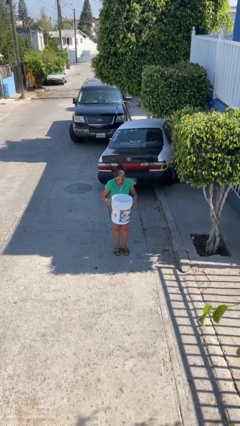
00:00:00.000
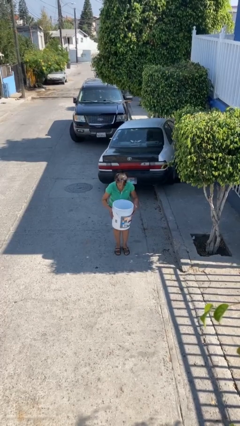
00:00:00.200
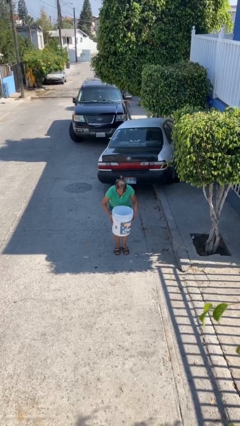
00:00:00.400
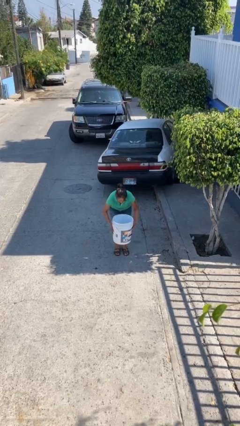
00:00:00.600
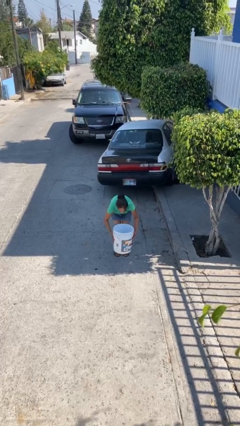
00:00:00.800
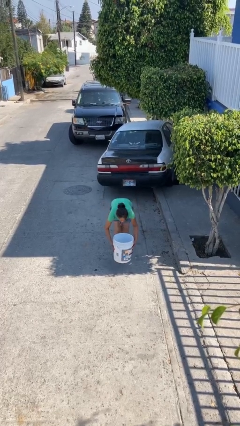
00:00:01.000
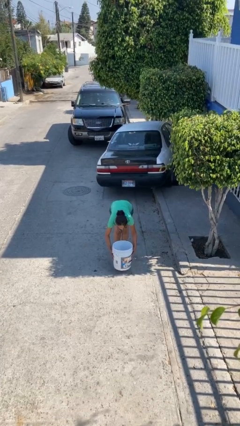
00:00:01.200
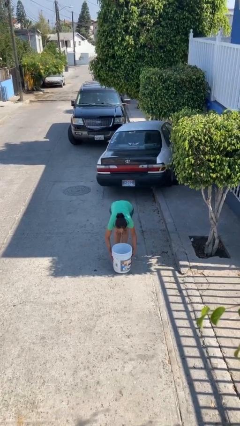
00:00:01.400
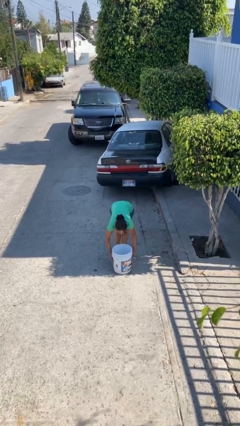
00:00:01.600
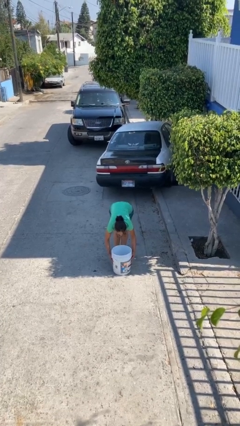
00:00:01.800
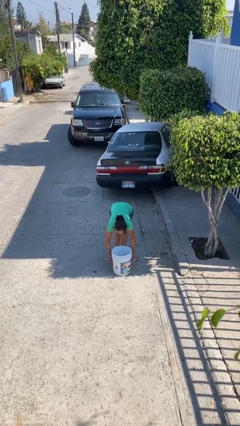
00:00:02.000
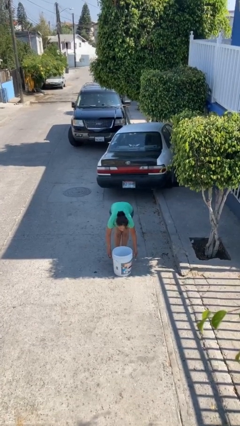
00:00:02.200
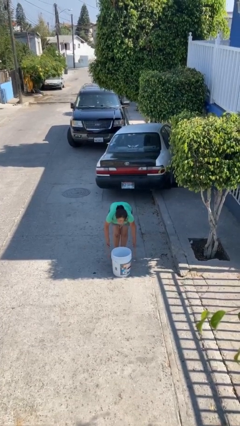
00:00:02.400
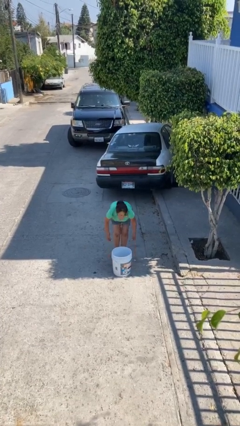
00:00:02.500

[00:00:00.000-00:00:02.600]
person puts down object on floor

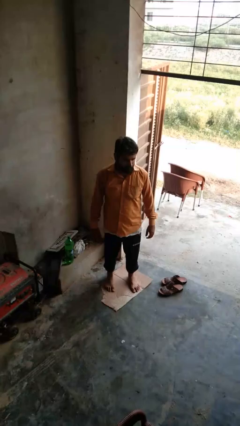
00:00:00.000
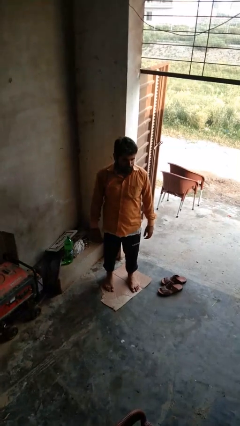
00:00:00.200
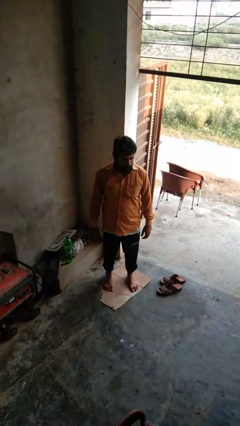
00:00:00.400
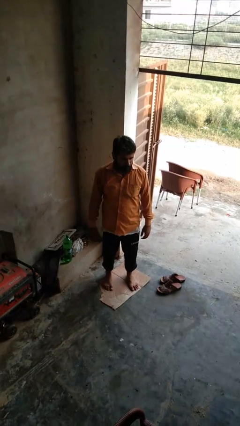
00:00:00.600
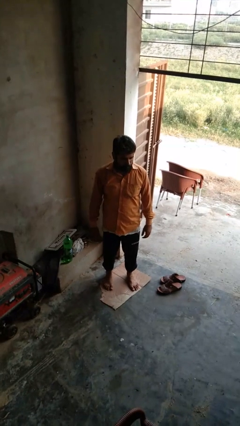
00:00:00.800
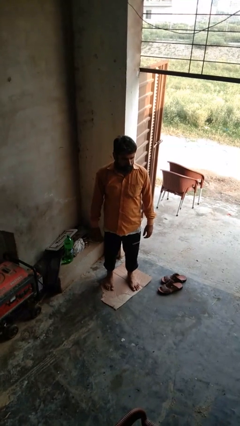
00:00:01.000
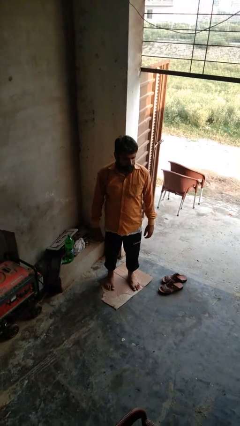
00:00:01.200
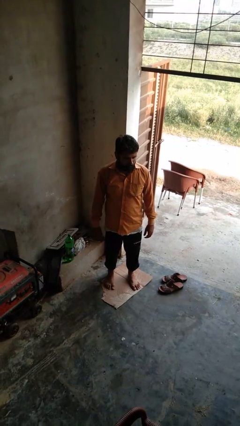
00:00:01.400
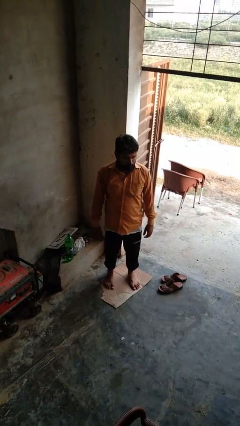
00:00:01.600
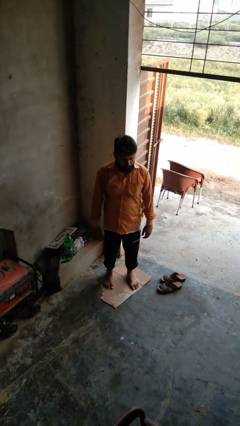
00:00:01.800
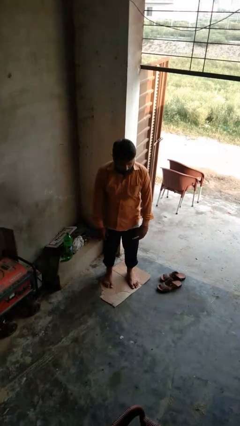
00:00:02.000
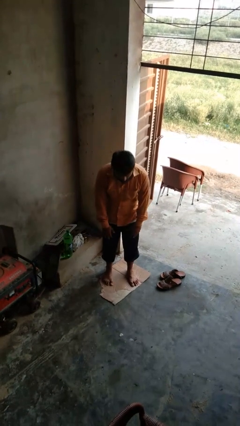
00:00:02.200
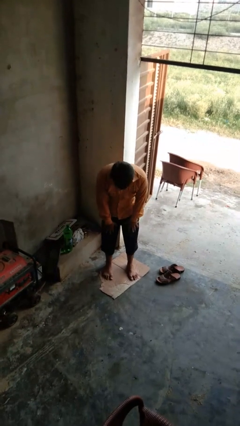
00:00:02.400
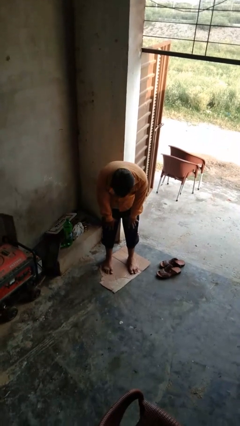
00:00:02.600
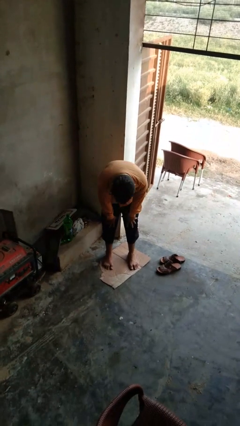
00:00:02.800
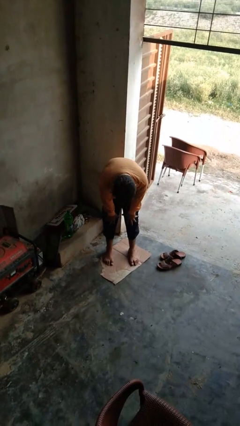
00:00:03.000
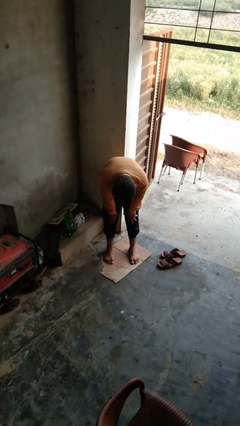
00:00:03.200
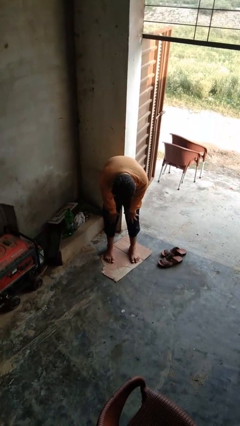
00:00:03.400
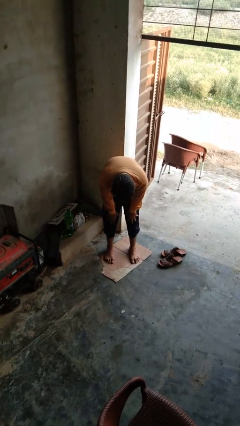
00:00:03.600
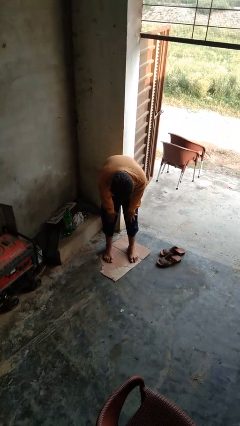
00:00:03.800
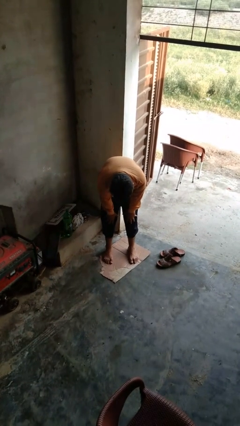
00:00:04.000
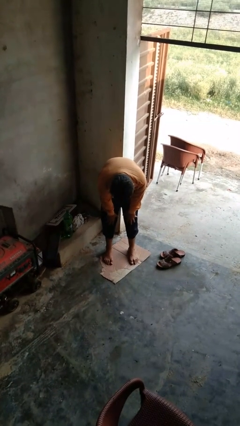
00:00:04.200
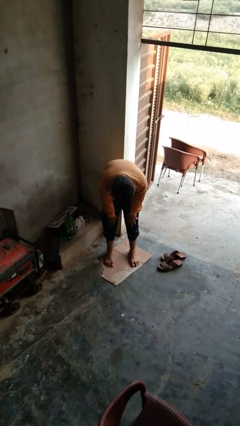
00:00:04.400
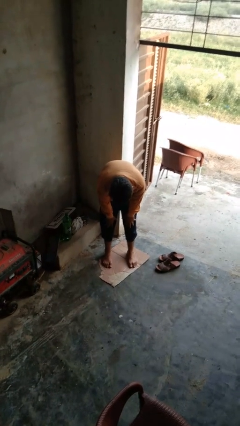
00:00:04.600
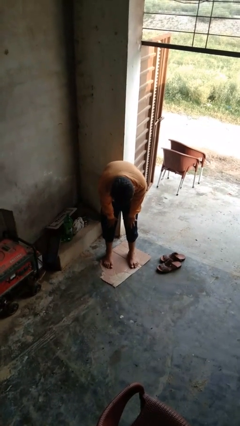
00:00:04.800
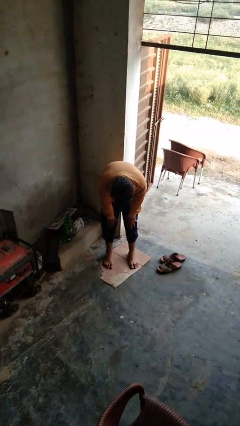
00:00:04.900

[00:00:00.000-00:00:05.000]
person bows

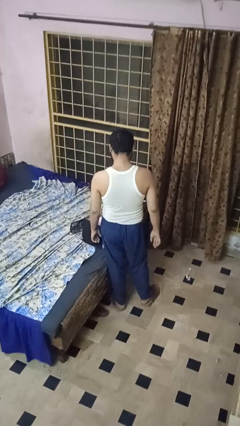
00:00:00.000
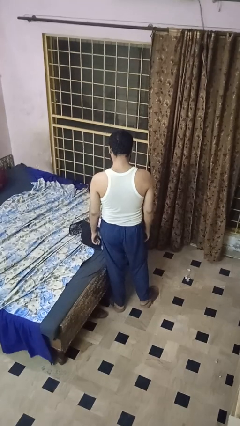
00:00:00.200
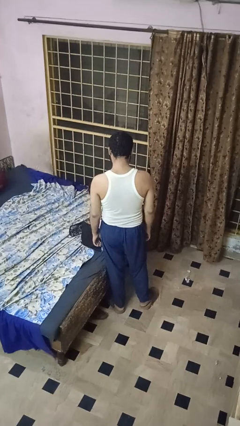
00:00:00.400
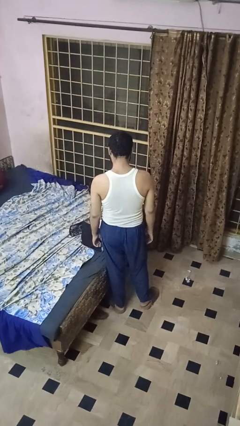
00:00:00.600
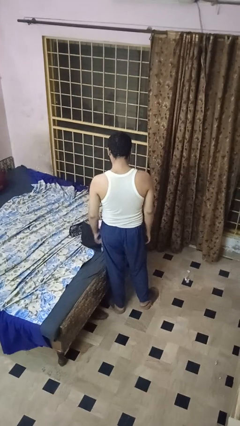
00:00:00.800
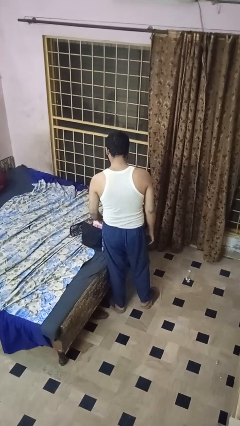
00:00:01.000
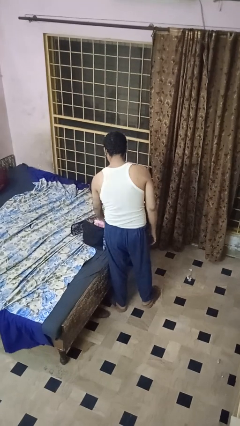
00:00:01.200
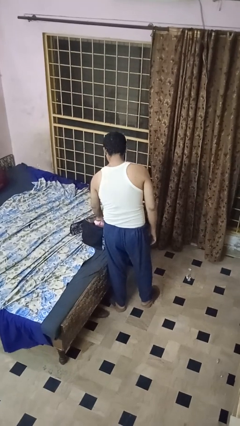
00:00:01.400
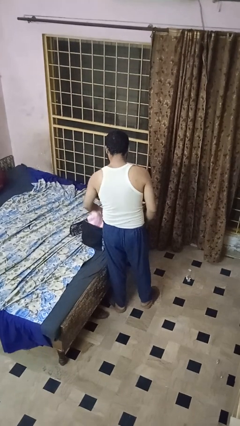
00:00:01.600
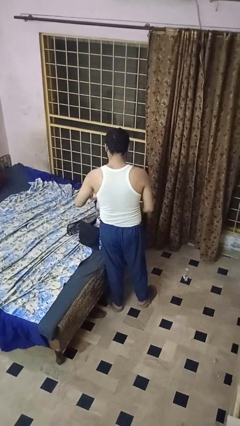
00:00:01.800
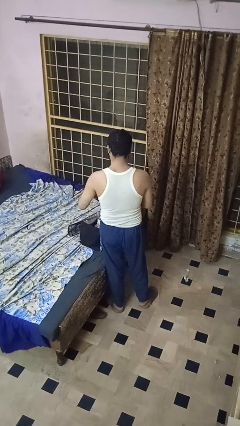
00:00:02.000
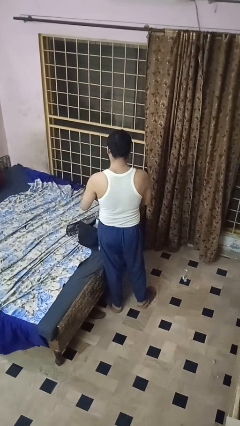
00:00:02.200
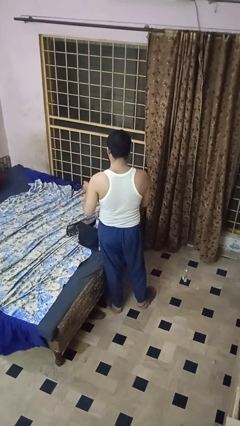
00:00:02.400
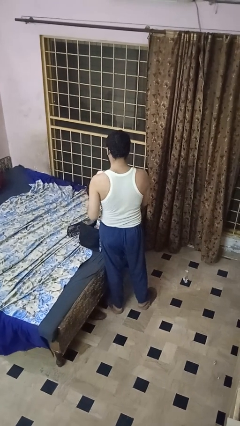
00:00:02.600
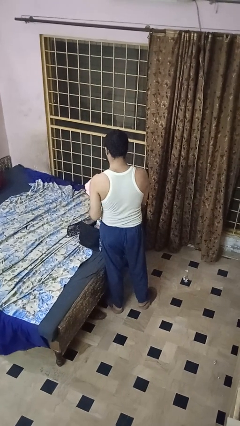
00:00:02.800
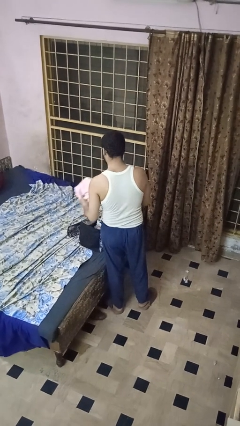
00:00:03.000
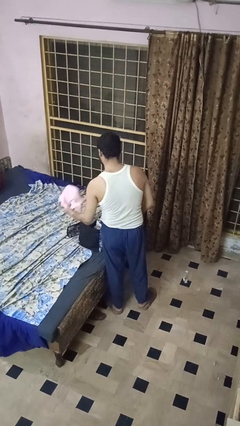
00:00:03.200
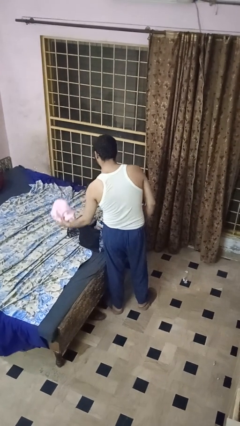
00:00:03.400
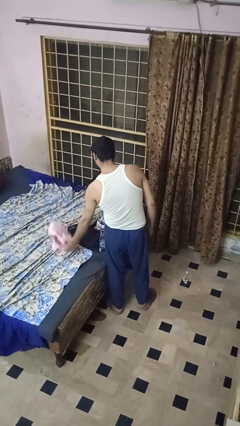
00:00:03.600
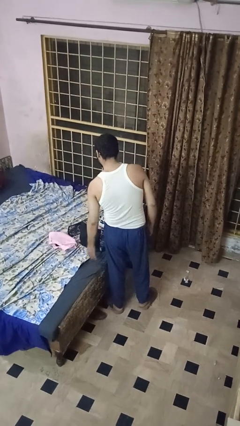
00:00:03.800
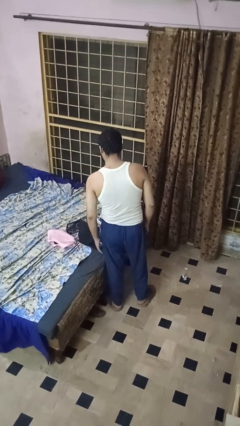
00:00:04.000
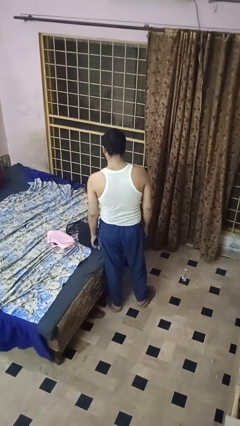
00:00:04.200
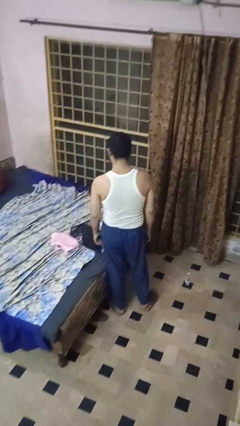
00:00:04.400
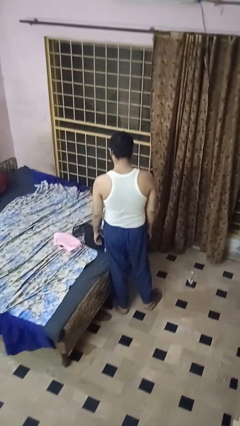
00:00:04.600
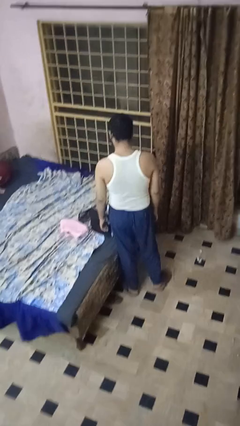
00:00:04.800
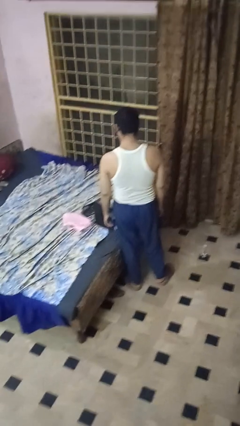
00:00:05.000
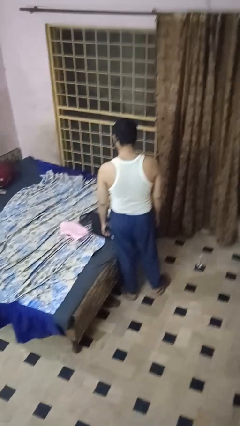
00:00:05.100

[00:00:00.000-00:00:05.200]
person unloads clothes from suitcase

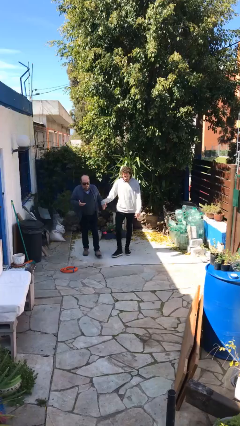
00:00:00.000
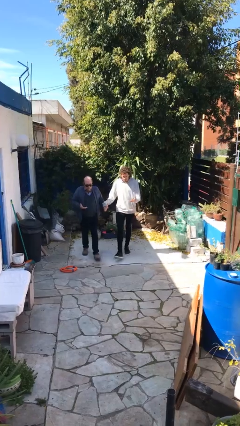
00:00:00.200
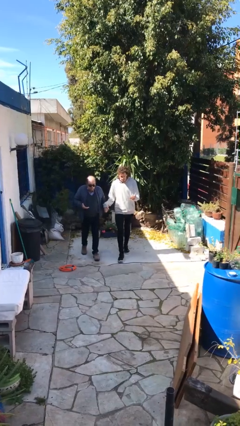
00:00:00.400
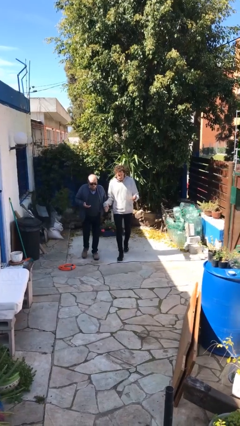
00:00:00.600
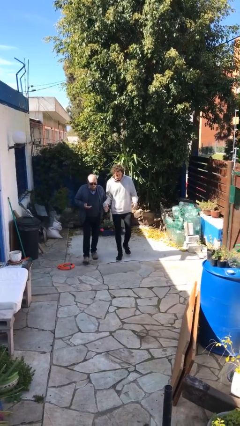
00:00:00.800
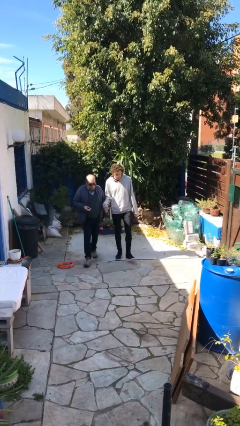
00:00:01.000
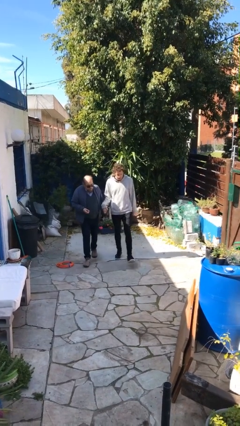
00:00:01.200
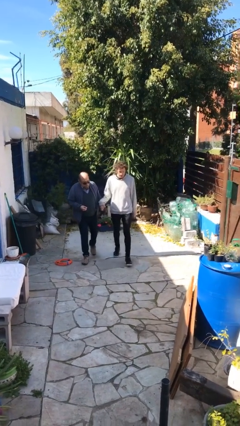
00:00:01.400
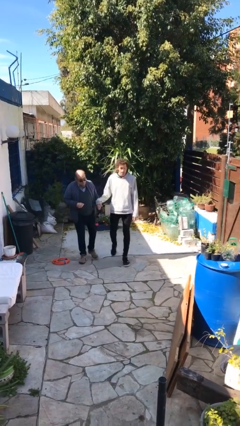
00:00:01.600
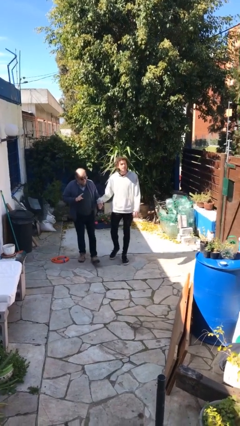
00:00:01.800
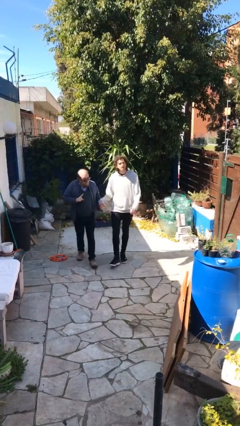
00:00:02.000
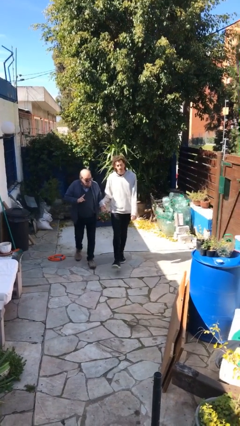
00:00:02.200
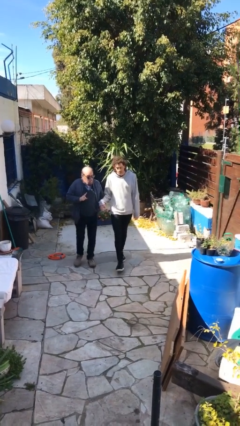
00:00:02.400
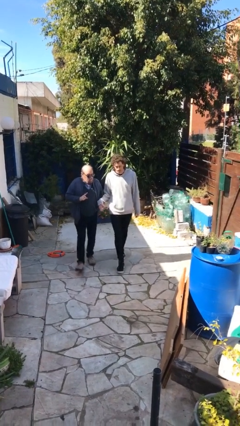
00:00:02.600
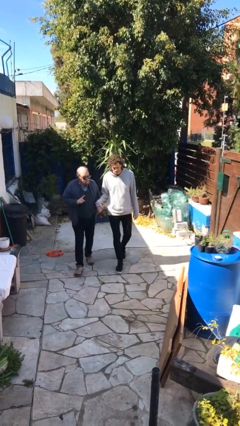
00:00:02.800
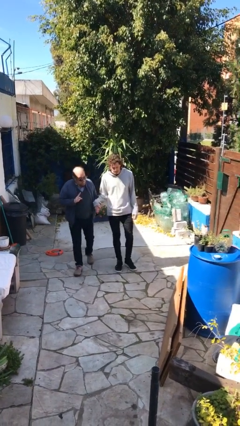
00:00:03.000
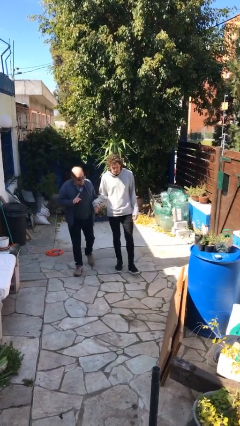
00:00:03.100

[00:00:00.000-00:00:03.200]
person holds hand

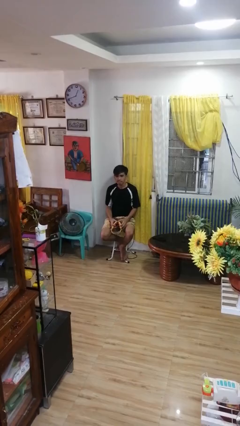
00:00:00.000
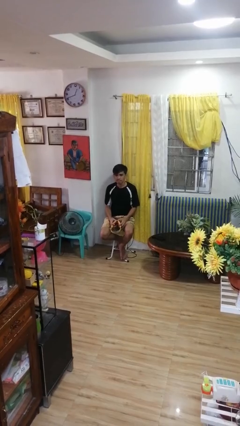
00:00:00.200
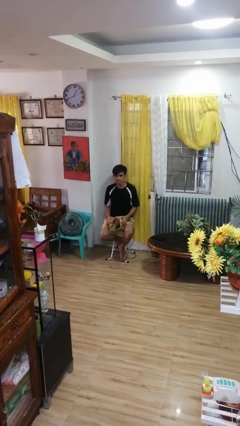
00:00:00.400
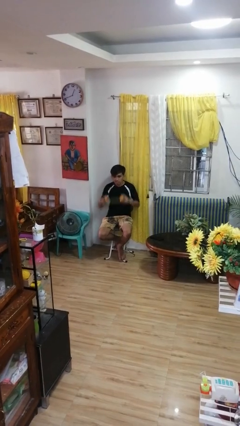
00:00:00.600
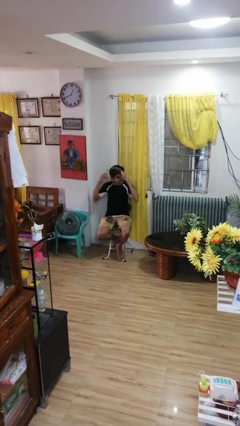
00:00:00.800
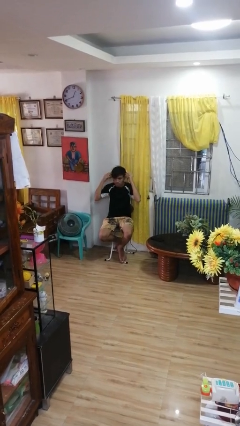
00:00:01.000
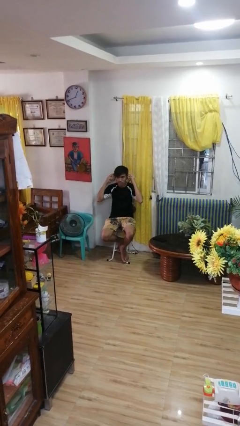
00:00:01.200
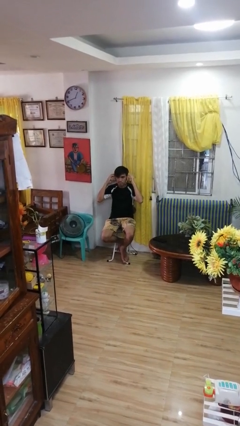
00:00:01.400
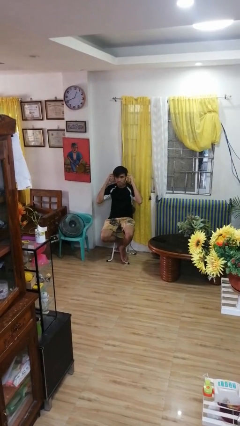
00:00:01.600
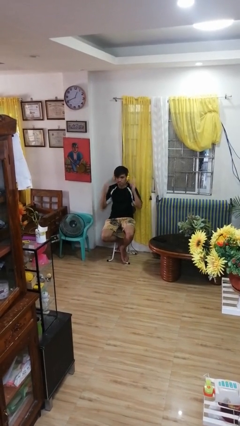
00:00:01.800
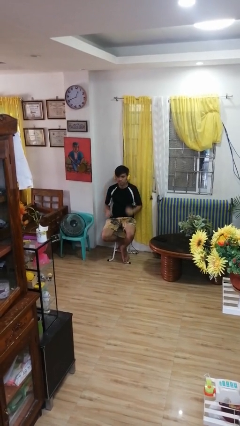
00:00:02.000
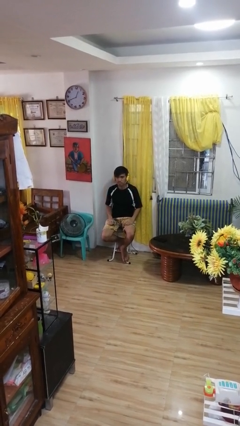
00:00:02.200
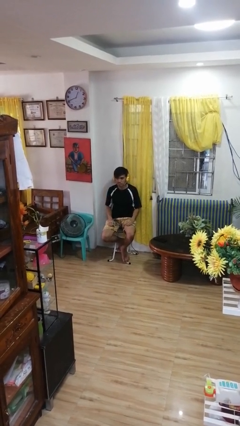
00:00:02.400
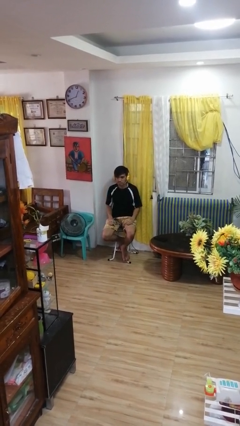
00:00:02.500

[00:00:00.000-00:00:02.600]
person puts on headphones
